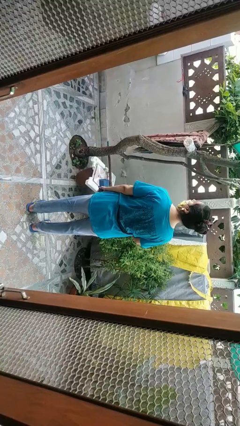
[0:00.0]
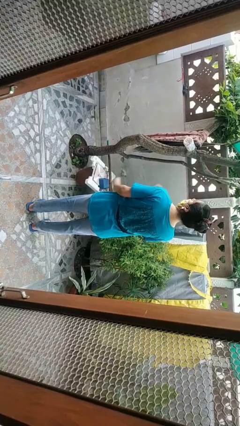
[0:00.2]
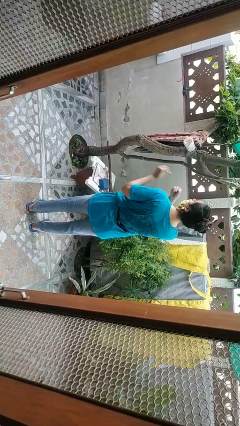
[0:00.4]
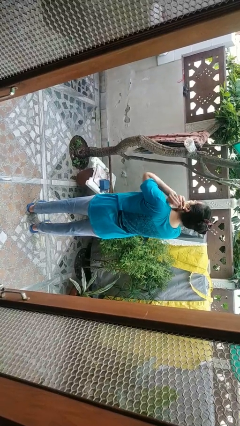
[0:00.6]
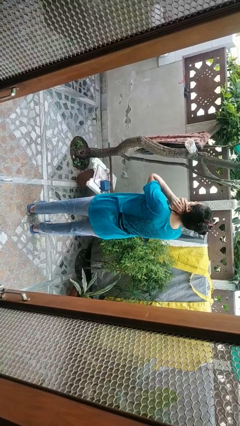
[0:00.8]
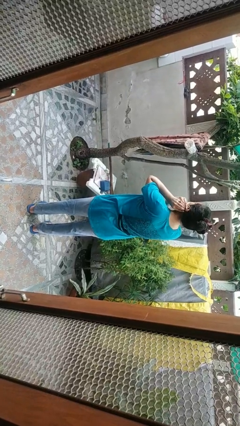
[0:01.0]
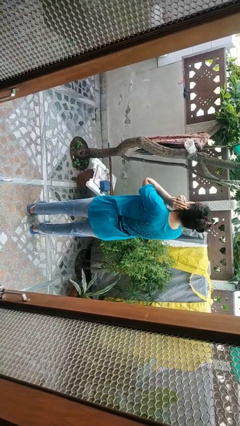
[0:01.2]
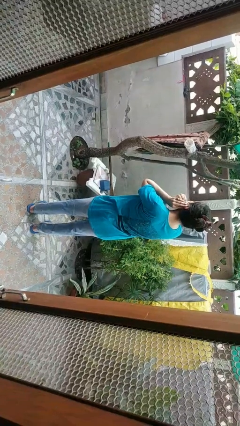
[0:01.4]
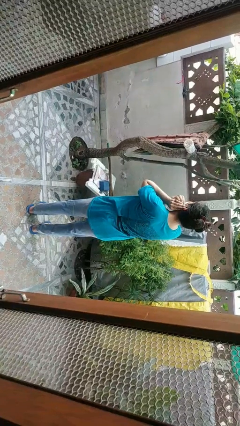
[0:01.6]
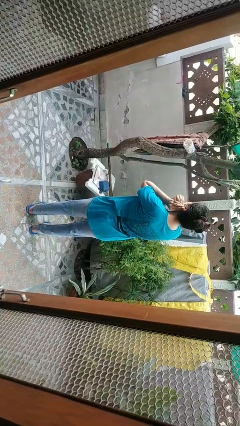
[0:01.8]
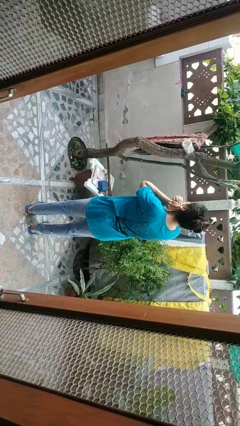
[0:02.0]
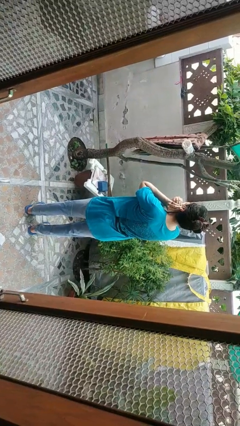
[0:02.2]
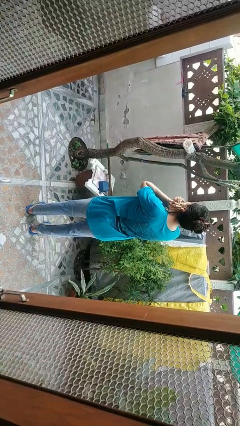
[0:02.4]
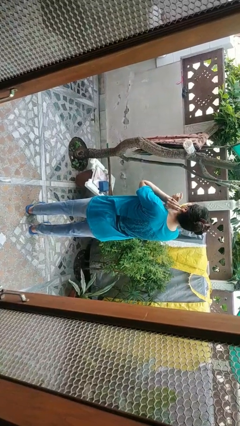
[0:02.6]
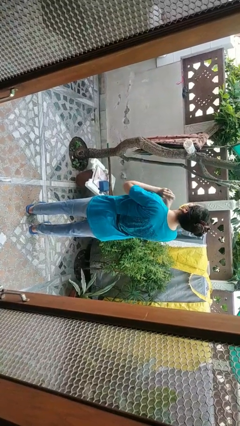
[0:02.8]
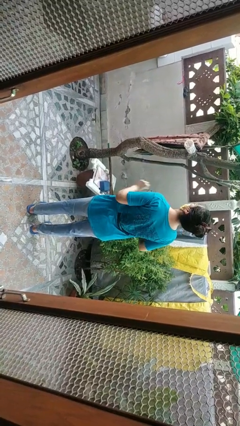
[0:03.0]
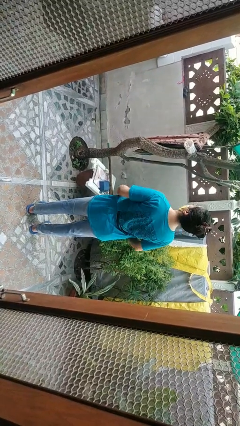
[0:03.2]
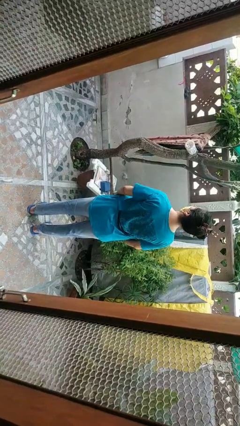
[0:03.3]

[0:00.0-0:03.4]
person takes off earrings

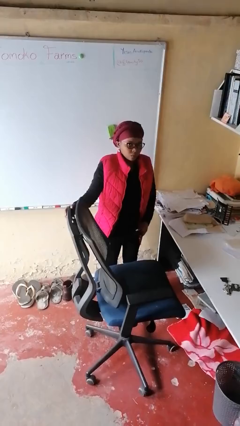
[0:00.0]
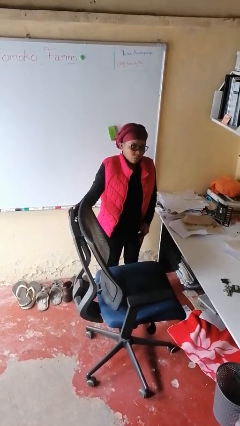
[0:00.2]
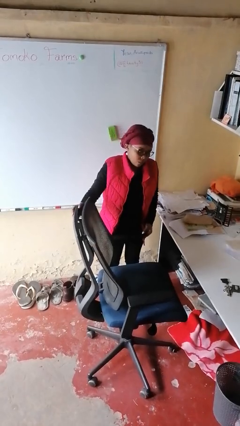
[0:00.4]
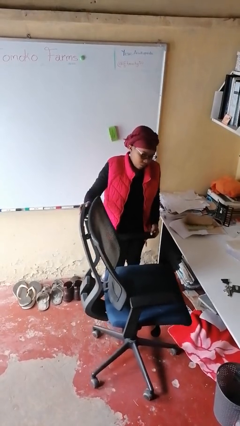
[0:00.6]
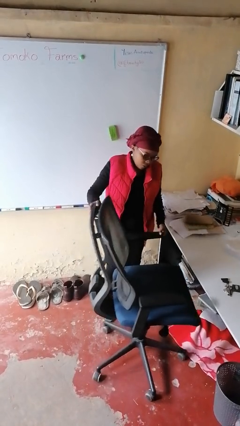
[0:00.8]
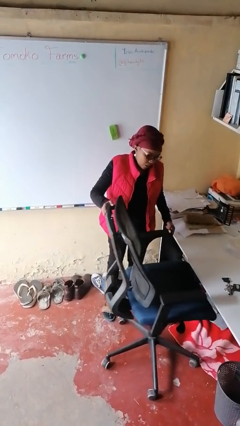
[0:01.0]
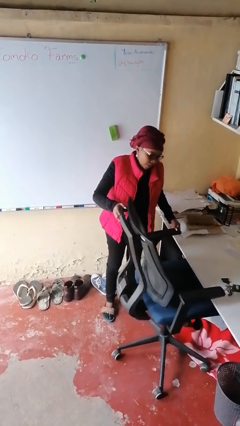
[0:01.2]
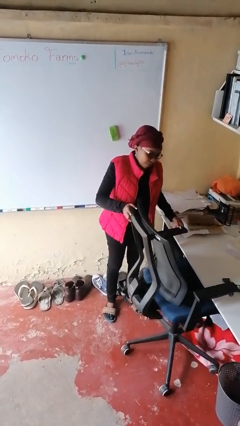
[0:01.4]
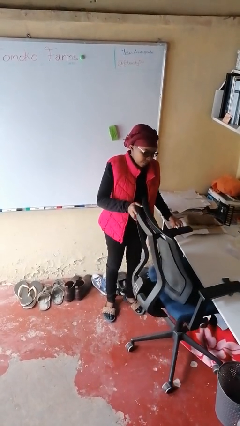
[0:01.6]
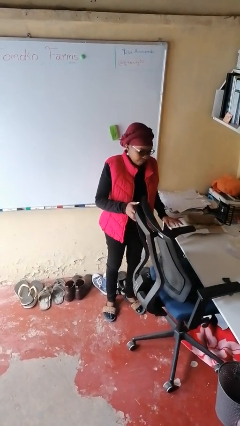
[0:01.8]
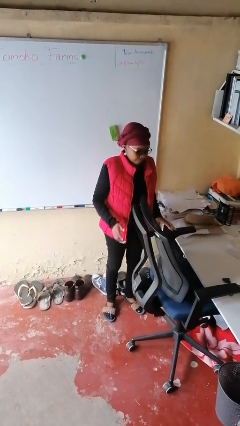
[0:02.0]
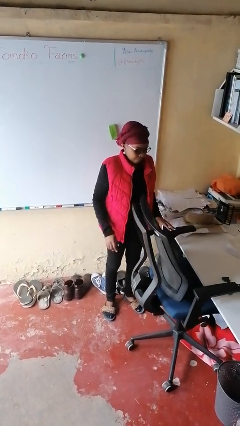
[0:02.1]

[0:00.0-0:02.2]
person pushes in chair

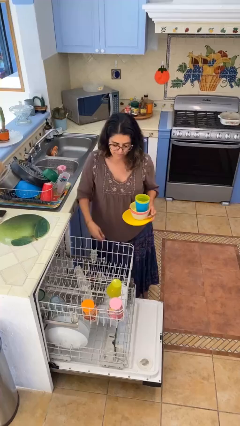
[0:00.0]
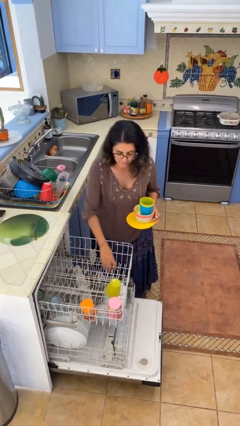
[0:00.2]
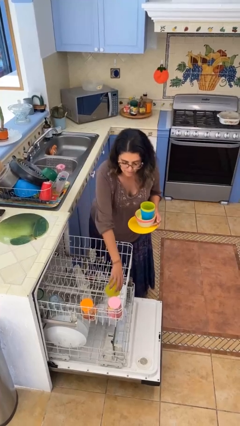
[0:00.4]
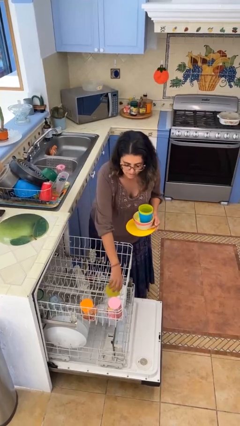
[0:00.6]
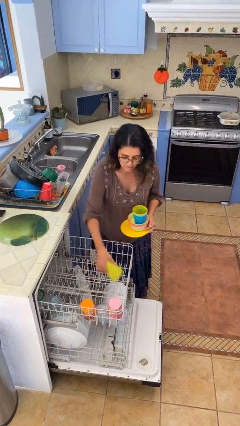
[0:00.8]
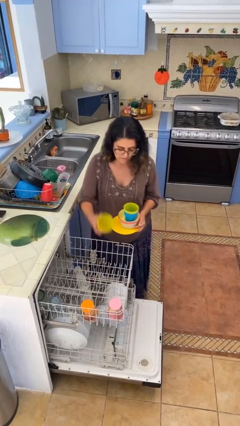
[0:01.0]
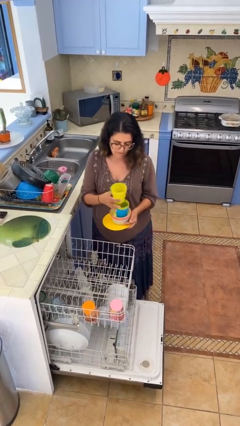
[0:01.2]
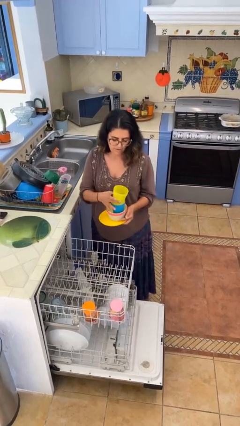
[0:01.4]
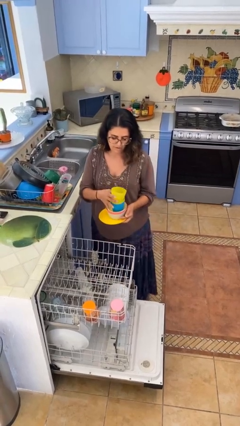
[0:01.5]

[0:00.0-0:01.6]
person unloads dishwasher

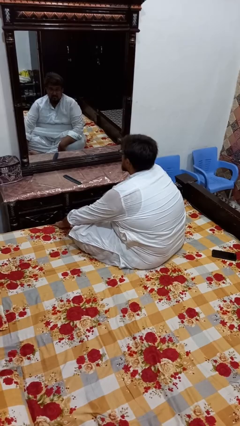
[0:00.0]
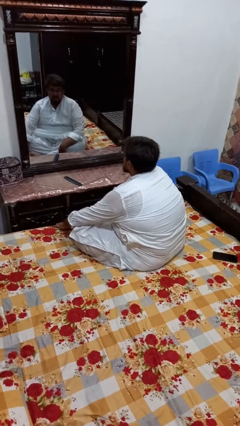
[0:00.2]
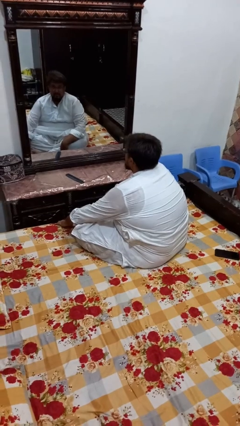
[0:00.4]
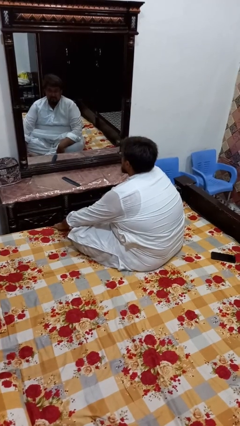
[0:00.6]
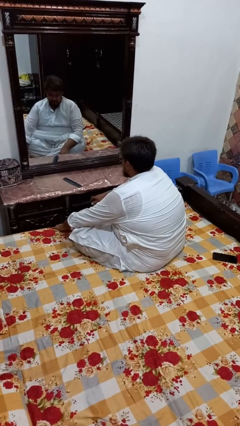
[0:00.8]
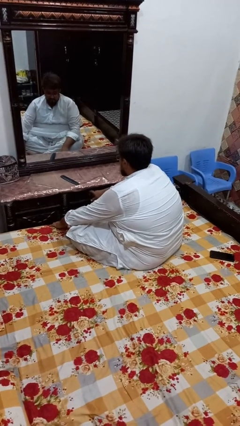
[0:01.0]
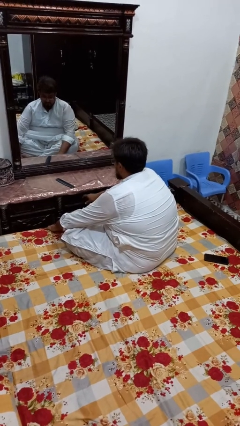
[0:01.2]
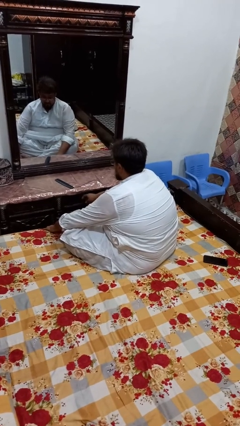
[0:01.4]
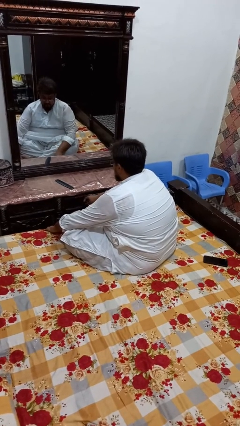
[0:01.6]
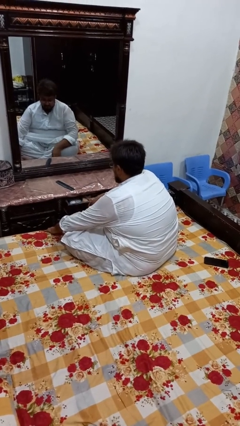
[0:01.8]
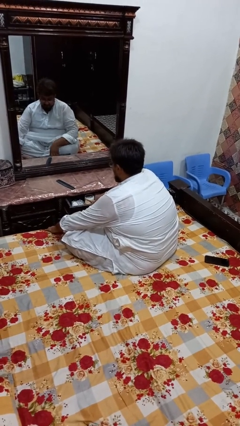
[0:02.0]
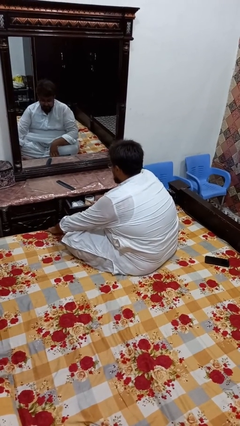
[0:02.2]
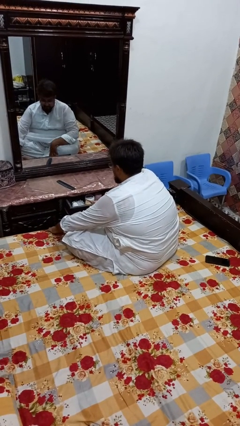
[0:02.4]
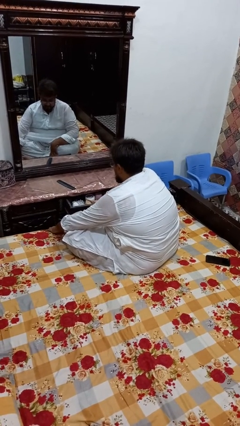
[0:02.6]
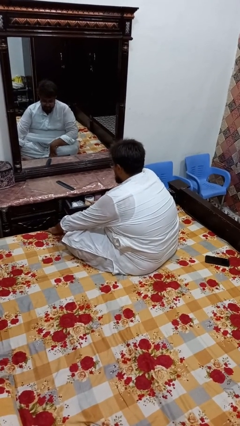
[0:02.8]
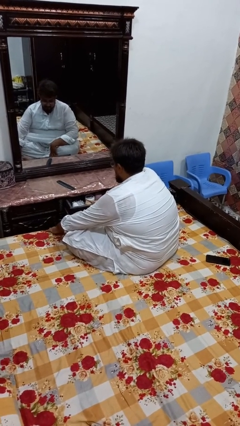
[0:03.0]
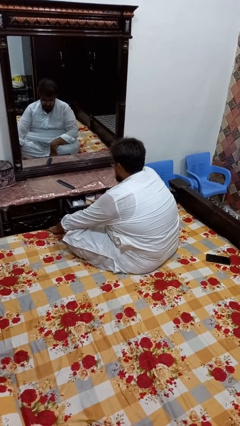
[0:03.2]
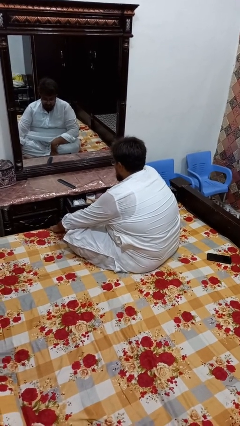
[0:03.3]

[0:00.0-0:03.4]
person opens dresser drawer

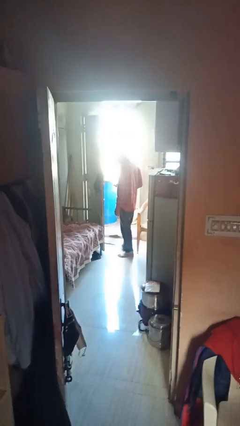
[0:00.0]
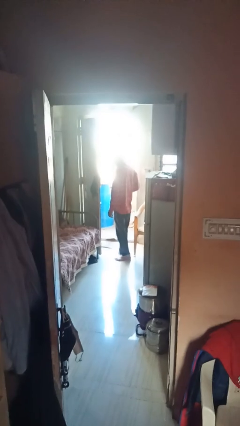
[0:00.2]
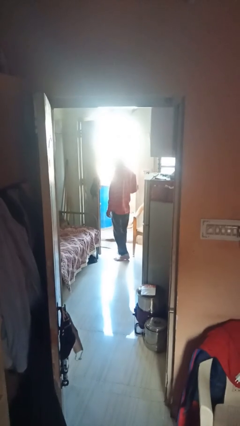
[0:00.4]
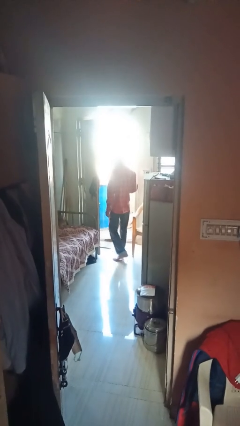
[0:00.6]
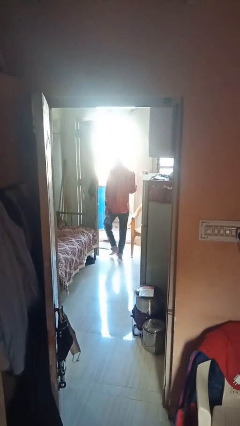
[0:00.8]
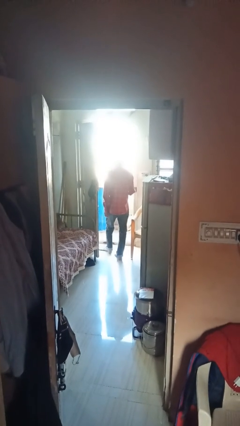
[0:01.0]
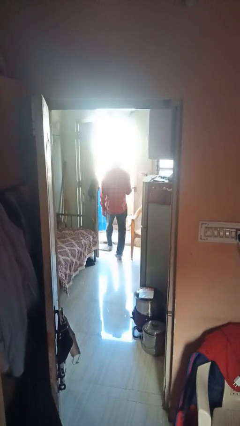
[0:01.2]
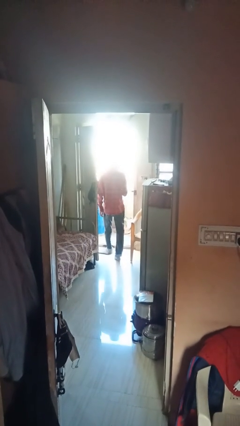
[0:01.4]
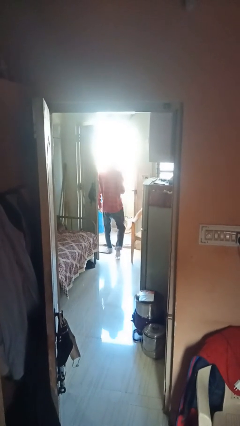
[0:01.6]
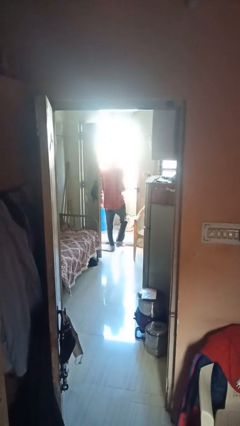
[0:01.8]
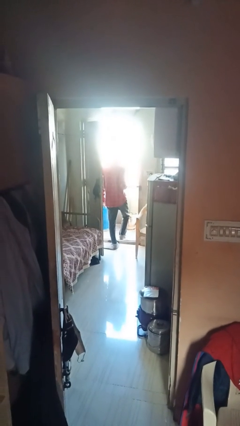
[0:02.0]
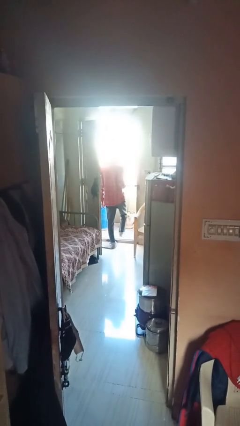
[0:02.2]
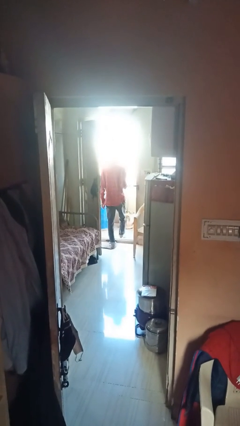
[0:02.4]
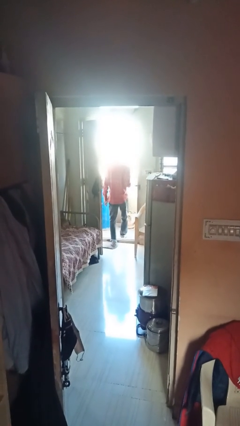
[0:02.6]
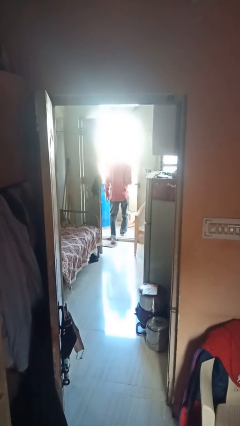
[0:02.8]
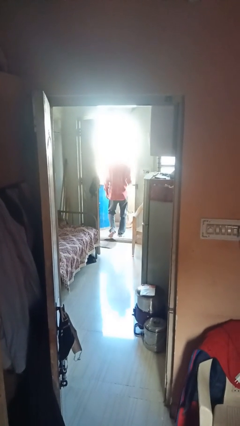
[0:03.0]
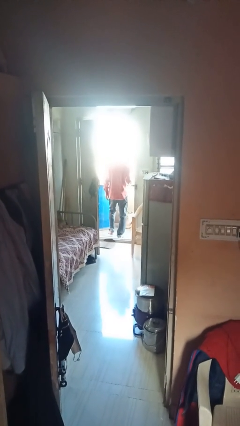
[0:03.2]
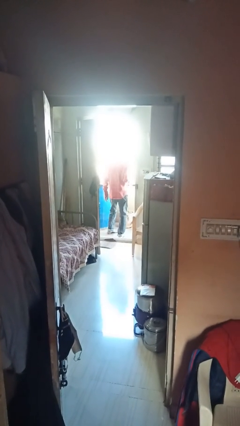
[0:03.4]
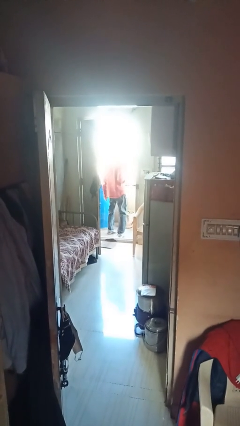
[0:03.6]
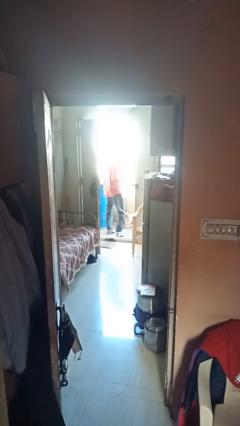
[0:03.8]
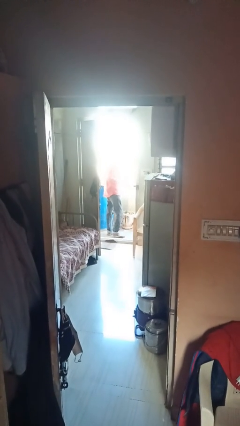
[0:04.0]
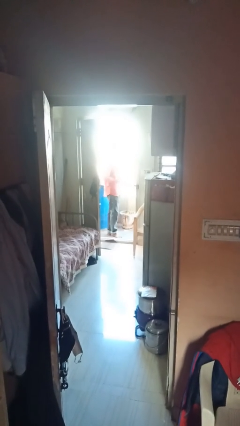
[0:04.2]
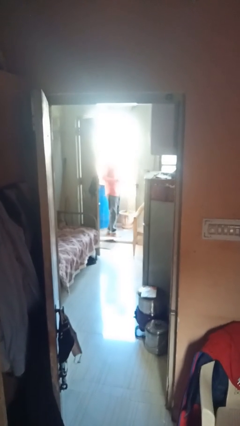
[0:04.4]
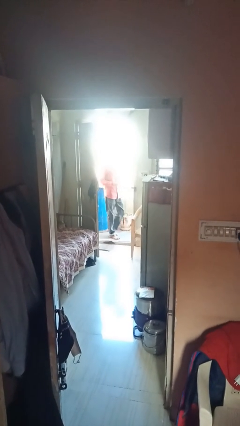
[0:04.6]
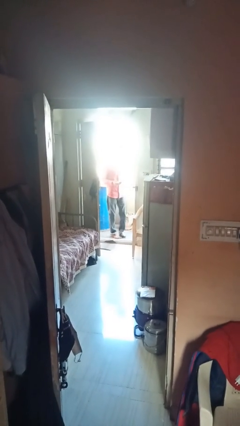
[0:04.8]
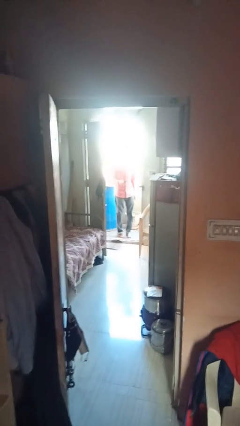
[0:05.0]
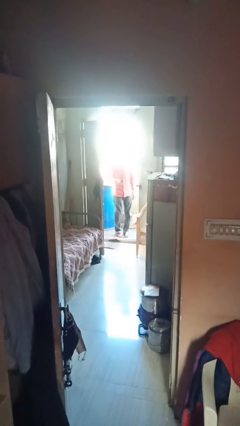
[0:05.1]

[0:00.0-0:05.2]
person exits scene through structure

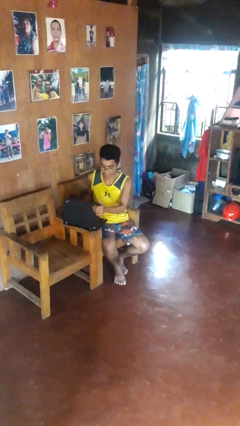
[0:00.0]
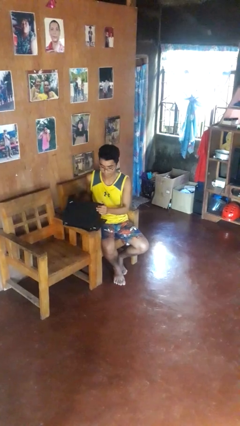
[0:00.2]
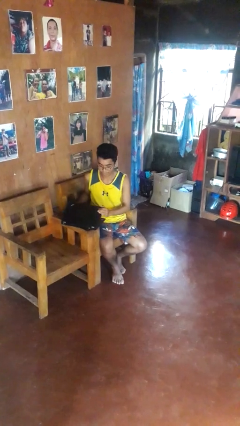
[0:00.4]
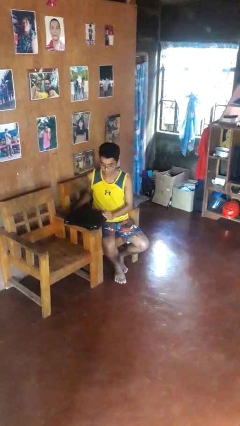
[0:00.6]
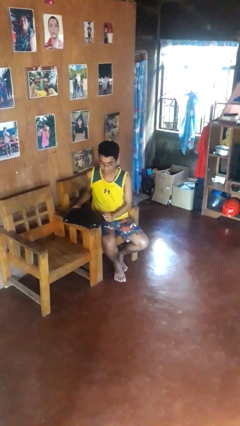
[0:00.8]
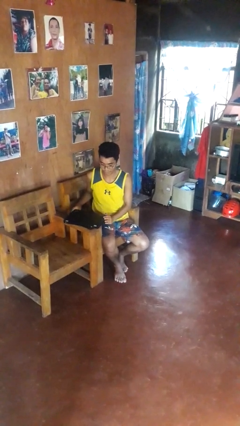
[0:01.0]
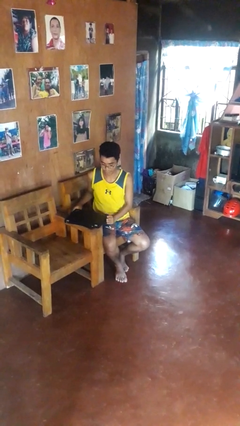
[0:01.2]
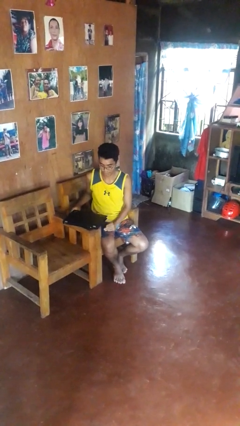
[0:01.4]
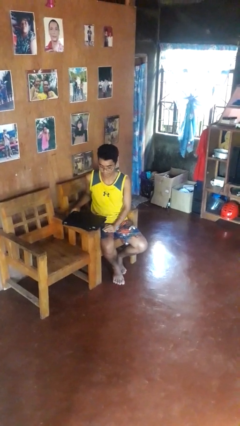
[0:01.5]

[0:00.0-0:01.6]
person closes laptop
